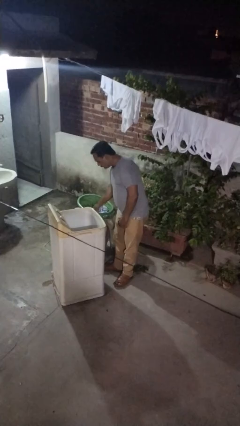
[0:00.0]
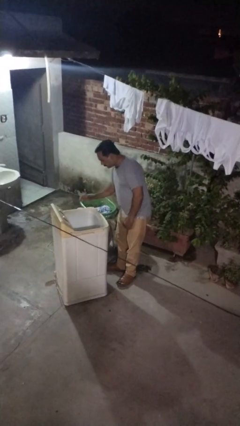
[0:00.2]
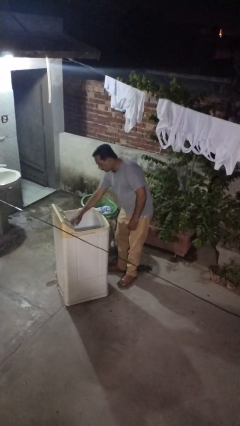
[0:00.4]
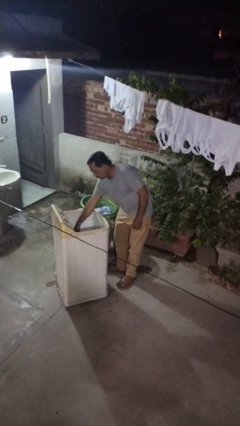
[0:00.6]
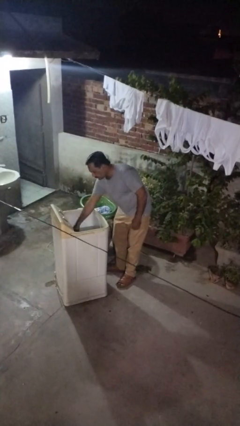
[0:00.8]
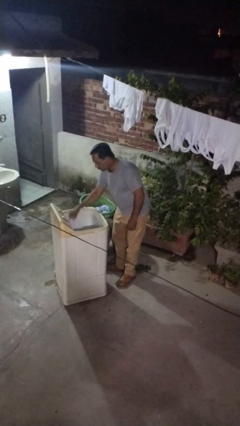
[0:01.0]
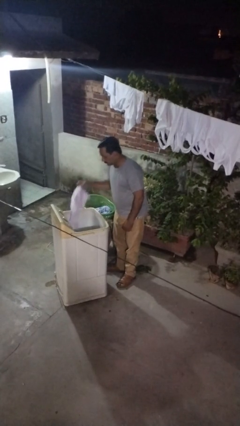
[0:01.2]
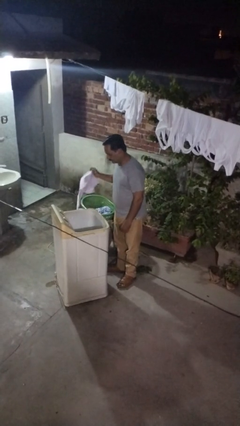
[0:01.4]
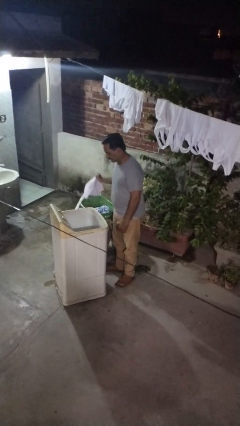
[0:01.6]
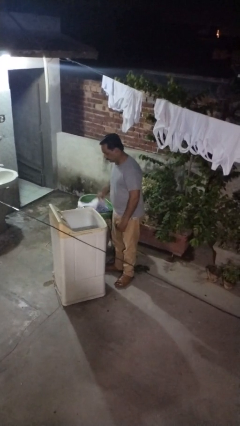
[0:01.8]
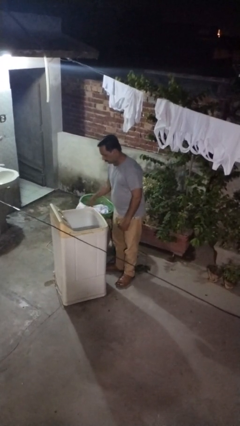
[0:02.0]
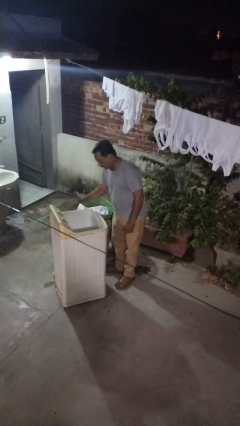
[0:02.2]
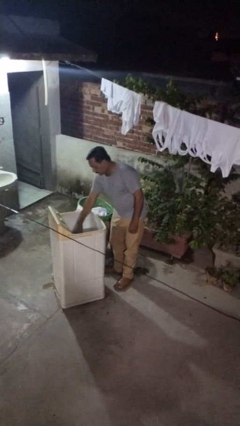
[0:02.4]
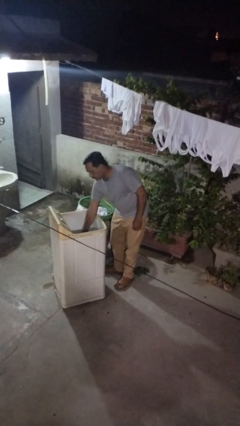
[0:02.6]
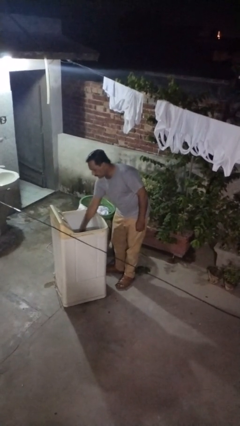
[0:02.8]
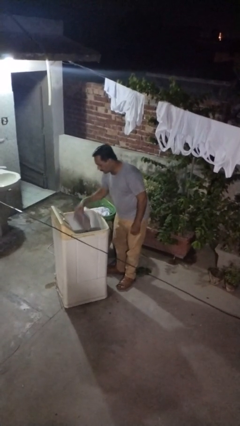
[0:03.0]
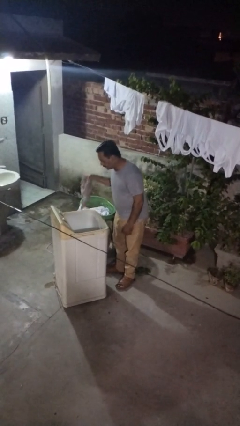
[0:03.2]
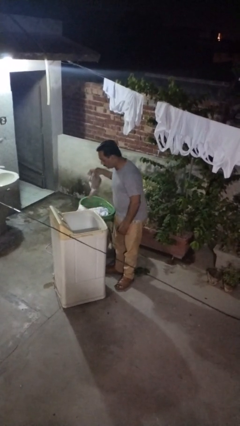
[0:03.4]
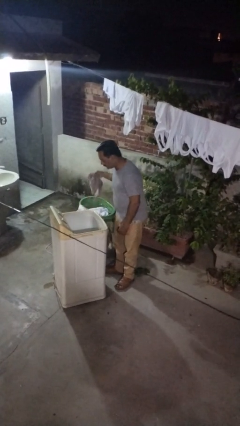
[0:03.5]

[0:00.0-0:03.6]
person loads clotheswasher

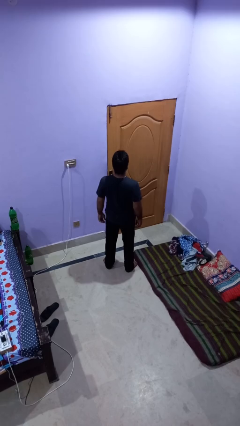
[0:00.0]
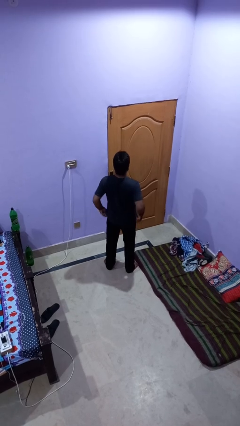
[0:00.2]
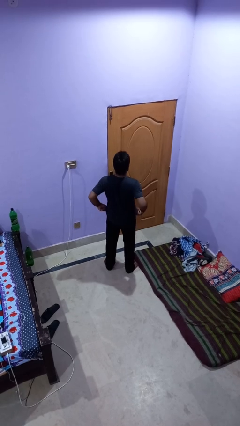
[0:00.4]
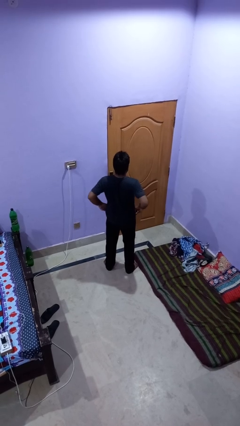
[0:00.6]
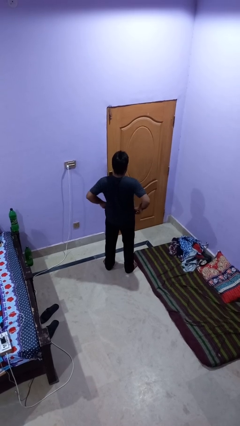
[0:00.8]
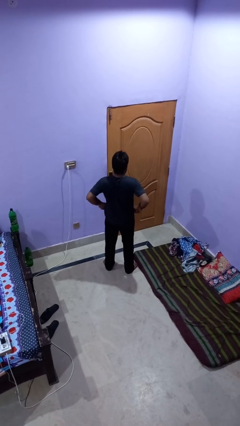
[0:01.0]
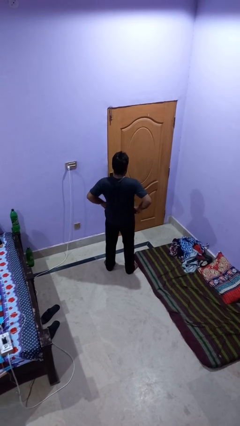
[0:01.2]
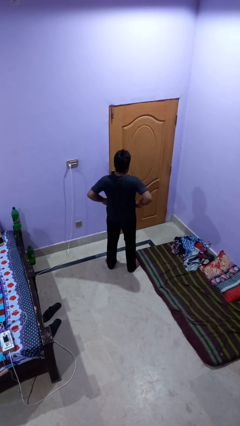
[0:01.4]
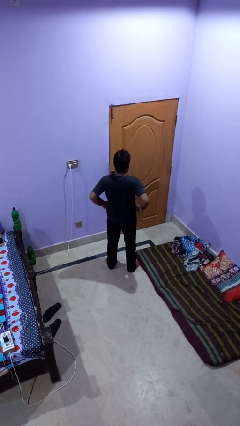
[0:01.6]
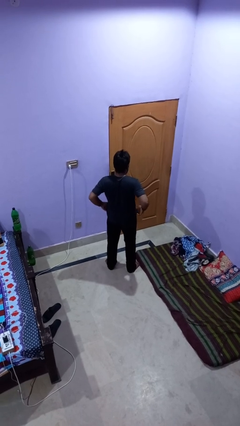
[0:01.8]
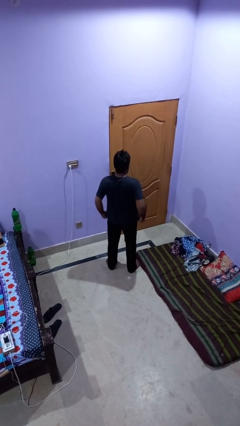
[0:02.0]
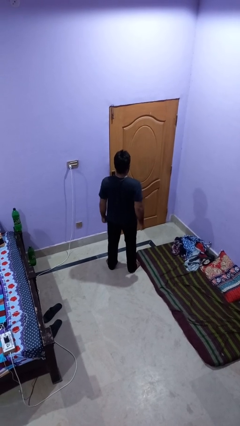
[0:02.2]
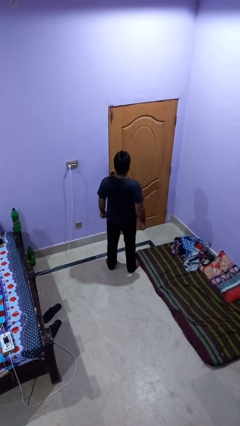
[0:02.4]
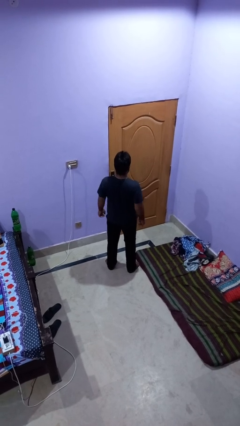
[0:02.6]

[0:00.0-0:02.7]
person hikes up pants

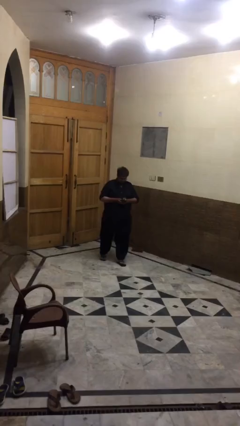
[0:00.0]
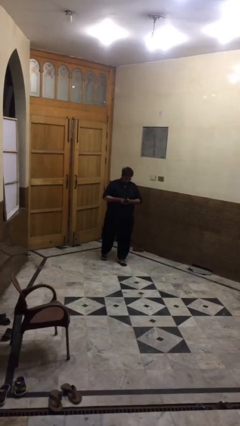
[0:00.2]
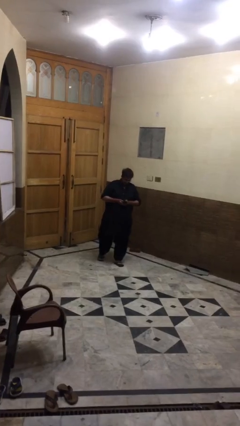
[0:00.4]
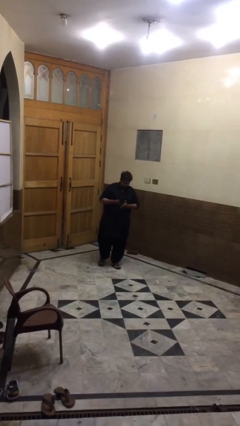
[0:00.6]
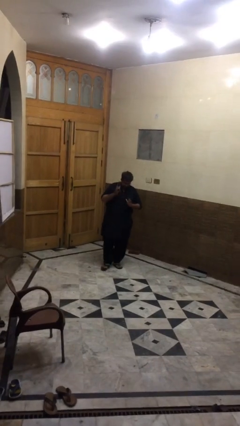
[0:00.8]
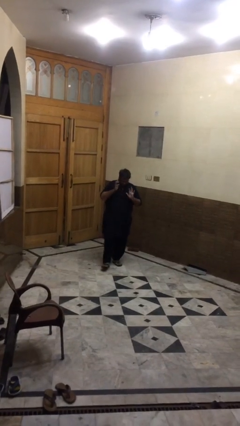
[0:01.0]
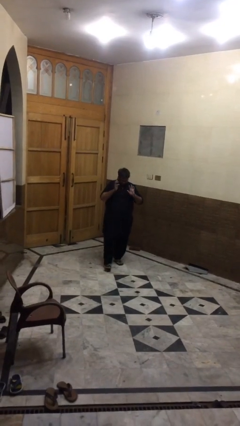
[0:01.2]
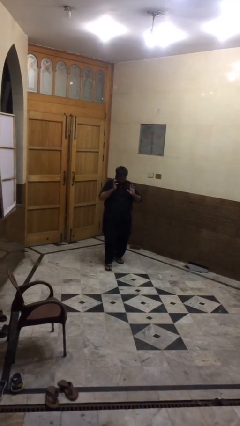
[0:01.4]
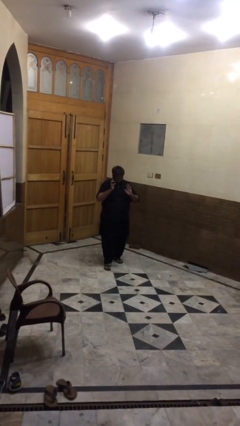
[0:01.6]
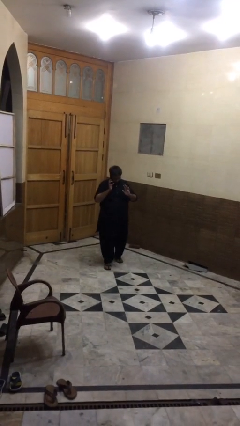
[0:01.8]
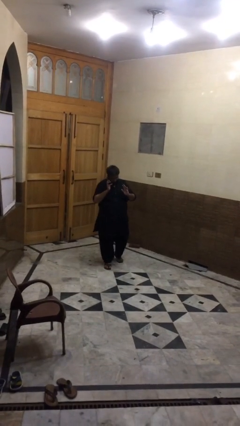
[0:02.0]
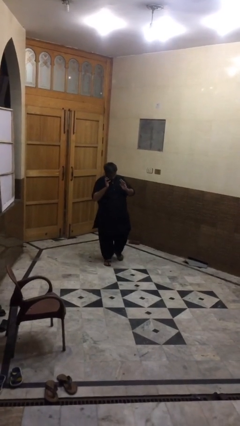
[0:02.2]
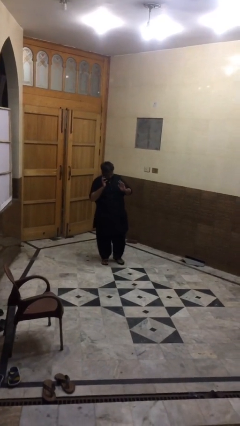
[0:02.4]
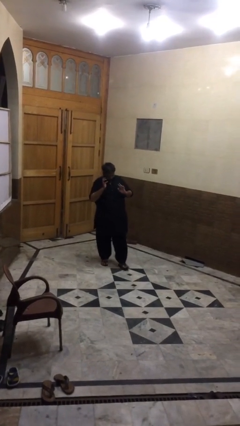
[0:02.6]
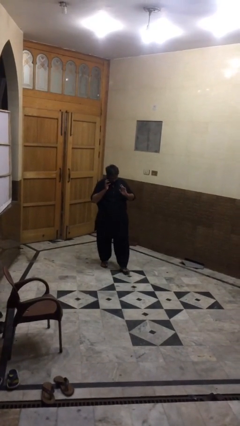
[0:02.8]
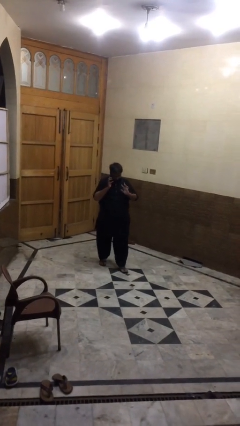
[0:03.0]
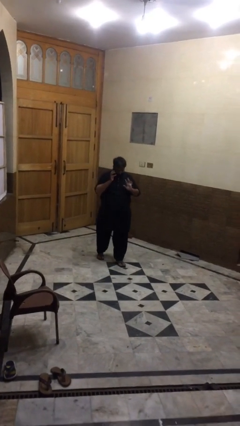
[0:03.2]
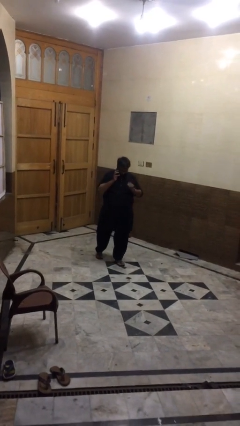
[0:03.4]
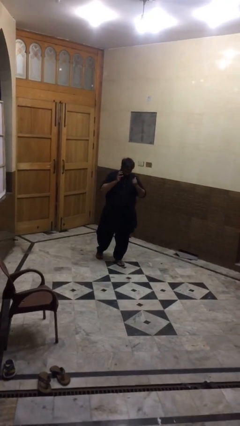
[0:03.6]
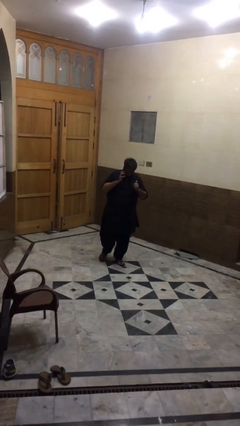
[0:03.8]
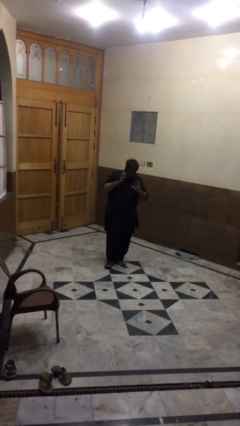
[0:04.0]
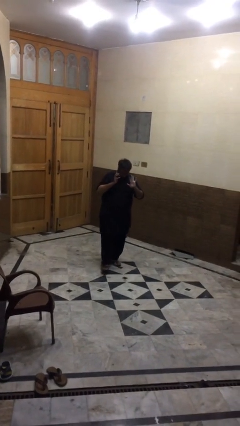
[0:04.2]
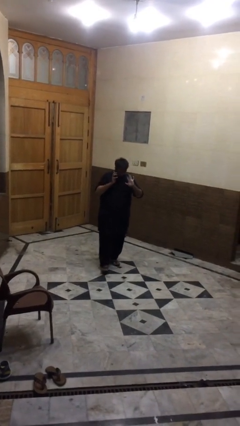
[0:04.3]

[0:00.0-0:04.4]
person talks on phone

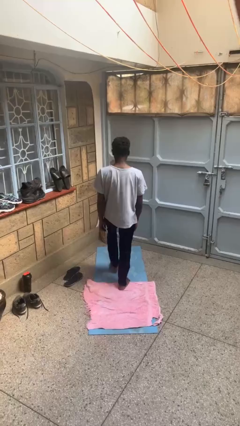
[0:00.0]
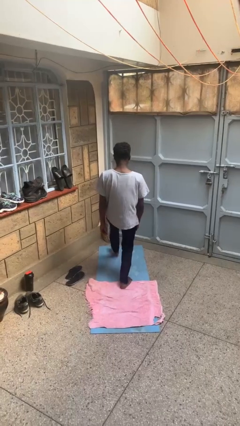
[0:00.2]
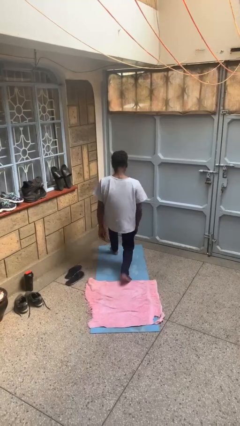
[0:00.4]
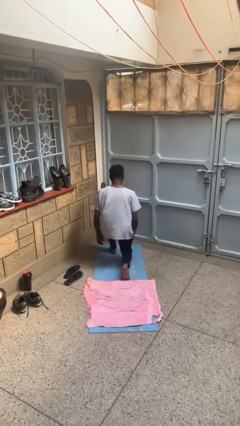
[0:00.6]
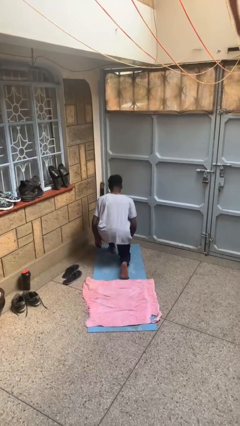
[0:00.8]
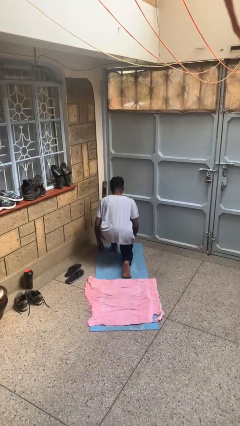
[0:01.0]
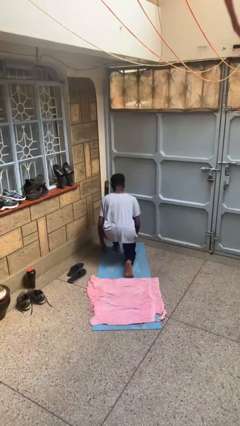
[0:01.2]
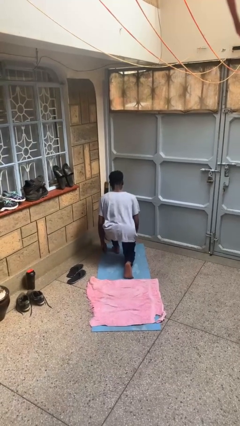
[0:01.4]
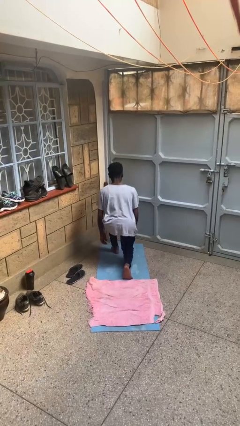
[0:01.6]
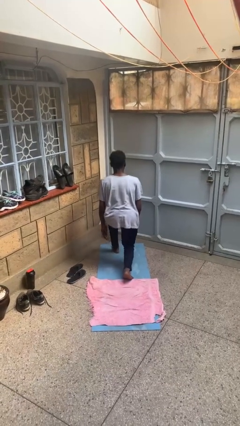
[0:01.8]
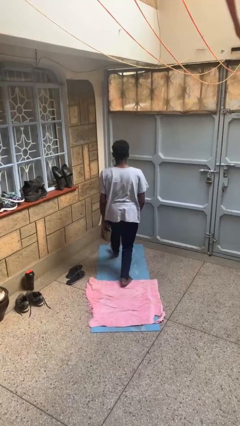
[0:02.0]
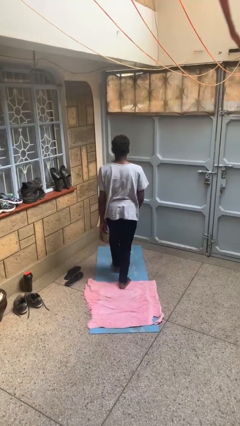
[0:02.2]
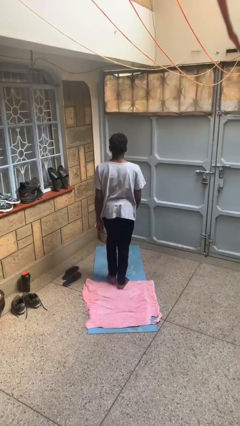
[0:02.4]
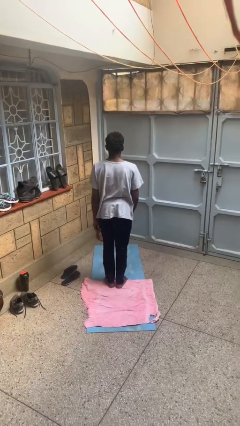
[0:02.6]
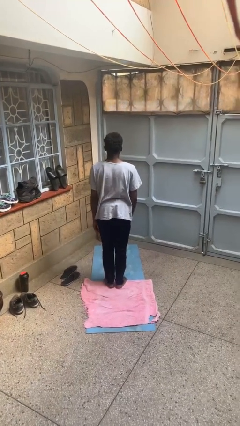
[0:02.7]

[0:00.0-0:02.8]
person exercises with lunges

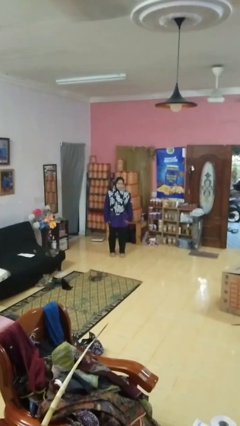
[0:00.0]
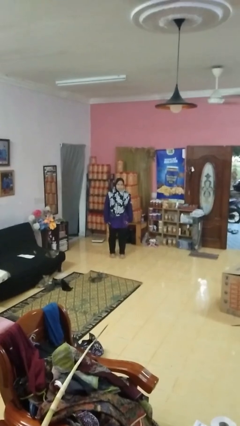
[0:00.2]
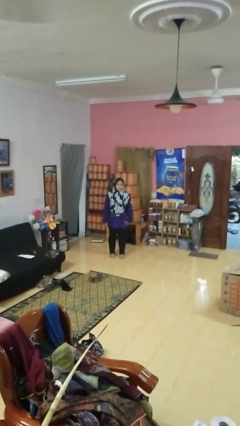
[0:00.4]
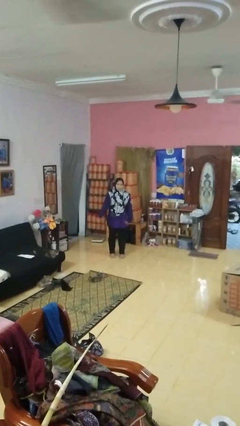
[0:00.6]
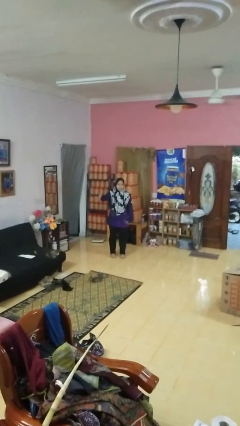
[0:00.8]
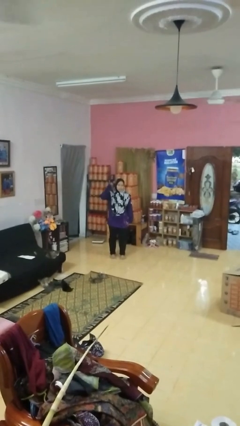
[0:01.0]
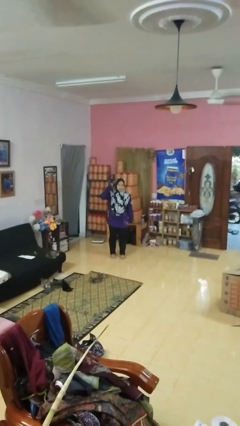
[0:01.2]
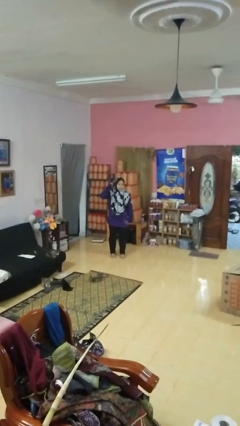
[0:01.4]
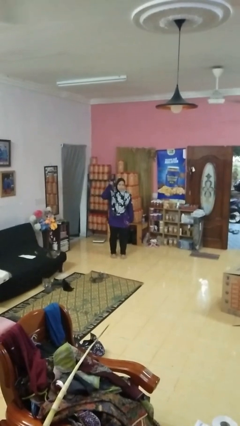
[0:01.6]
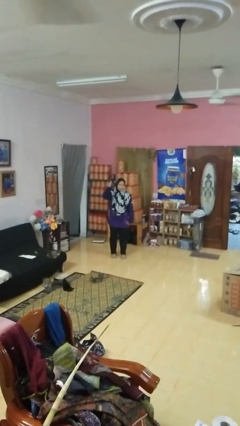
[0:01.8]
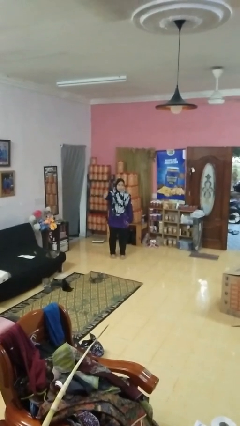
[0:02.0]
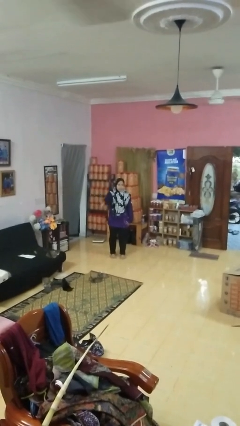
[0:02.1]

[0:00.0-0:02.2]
person gestures behind me

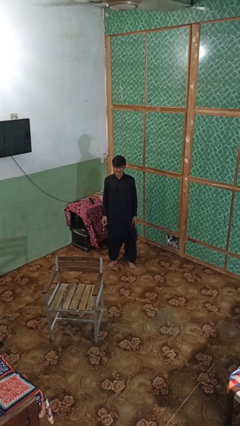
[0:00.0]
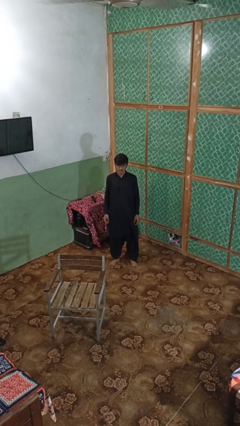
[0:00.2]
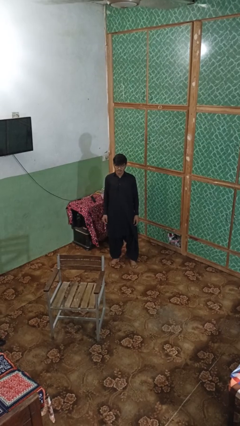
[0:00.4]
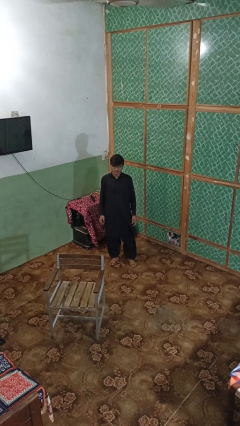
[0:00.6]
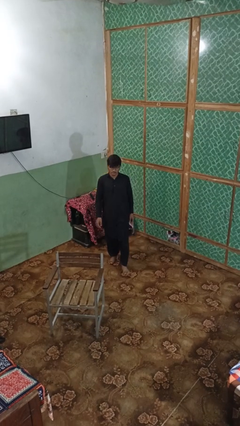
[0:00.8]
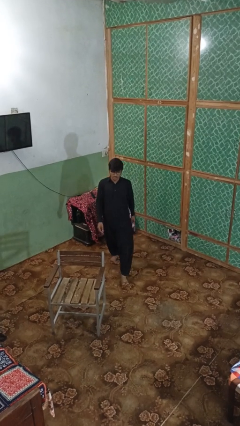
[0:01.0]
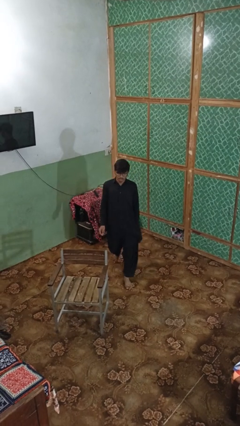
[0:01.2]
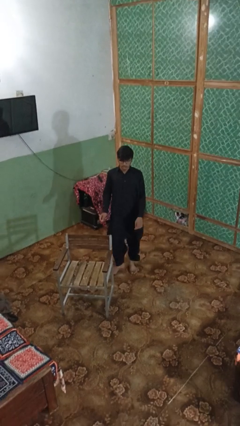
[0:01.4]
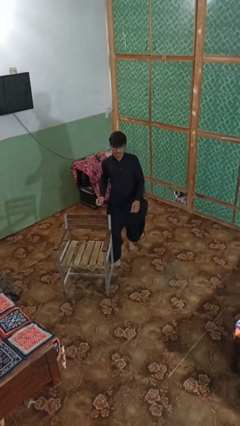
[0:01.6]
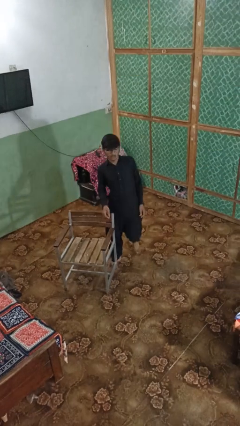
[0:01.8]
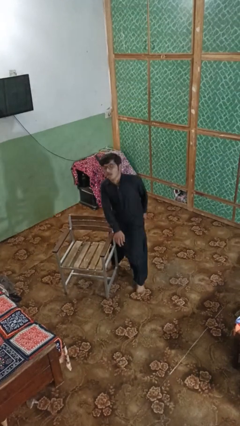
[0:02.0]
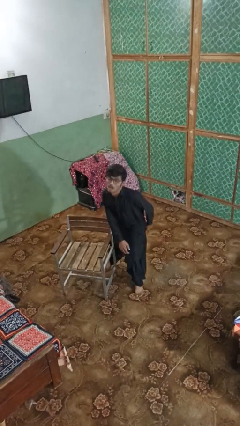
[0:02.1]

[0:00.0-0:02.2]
person trips on object on floor

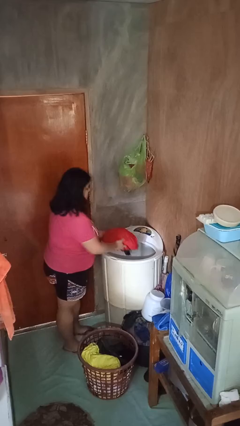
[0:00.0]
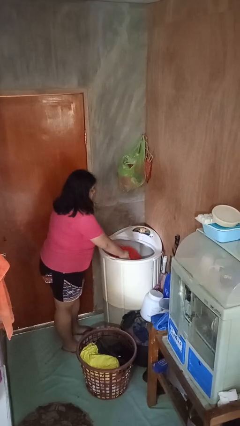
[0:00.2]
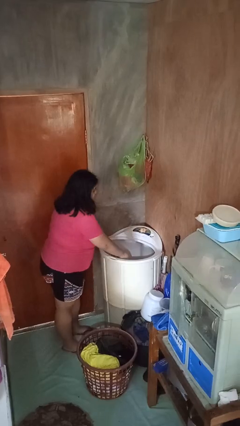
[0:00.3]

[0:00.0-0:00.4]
person loads dryer
